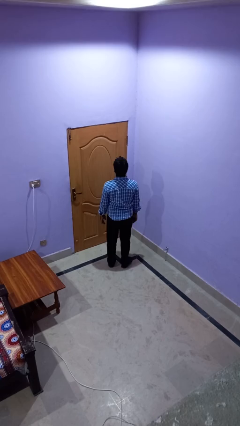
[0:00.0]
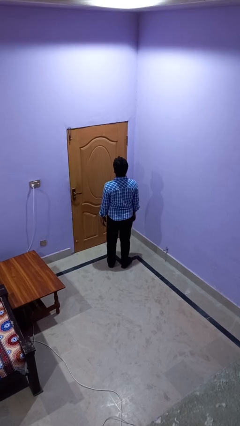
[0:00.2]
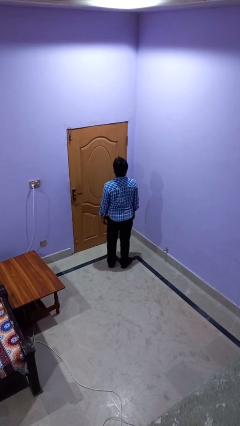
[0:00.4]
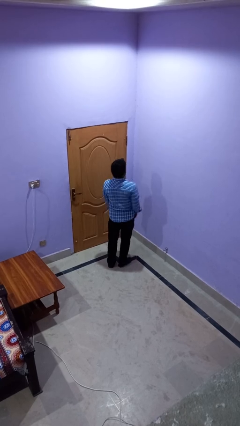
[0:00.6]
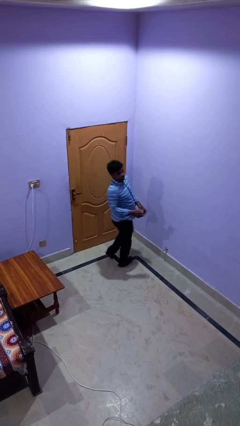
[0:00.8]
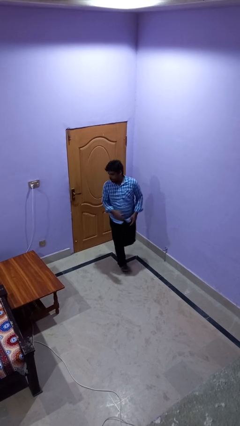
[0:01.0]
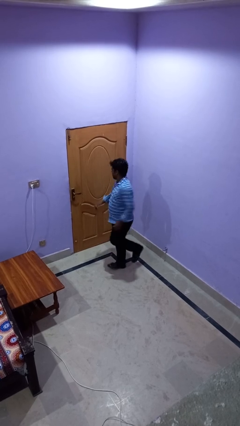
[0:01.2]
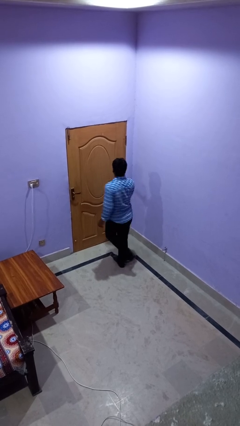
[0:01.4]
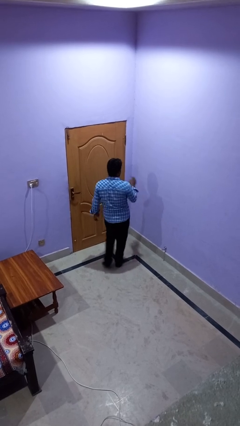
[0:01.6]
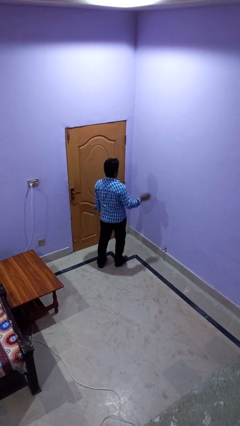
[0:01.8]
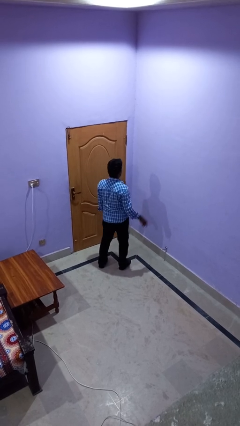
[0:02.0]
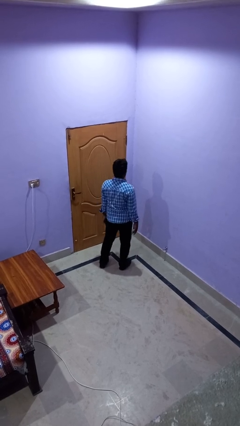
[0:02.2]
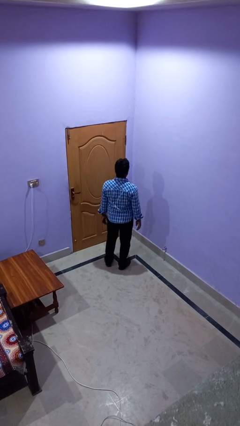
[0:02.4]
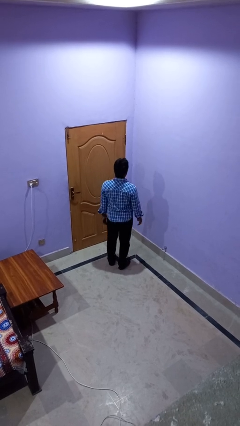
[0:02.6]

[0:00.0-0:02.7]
person twirls

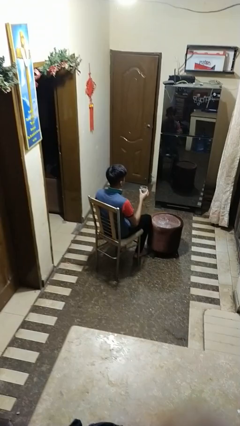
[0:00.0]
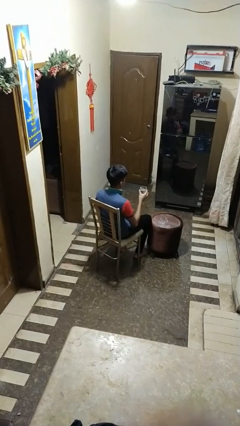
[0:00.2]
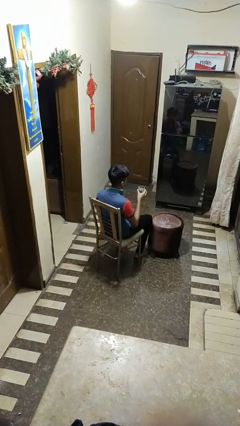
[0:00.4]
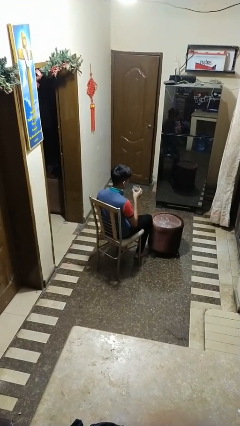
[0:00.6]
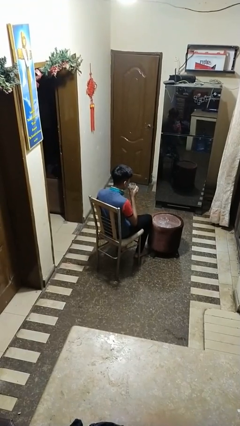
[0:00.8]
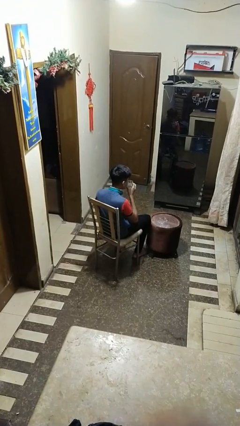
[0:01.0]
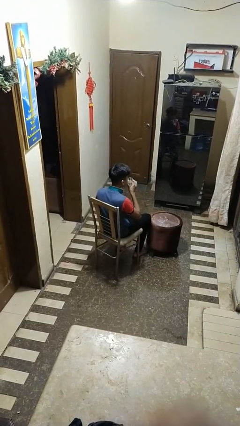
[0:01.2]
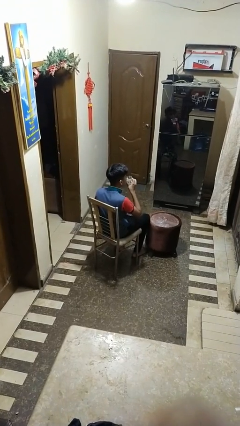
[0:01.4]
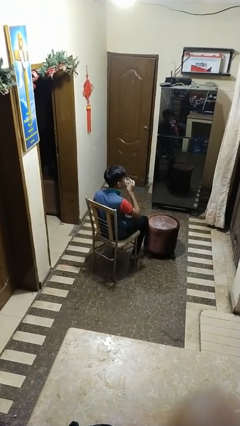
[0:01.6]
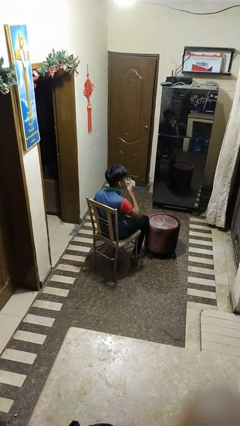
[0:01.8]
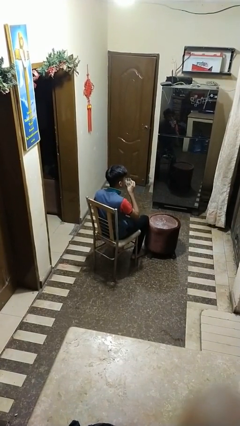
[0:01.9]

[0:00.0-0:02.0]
person drinks from shotglass

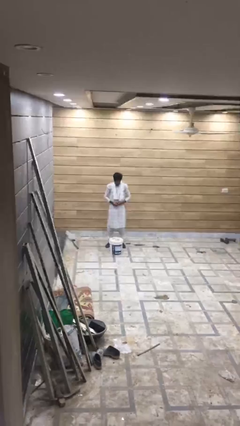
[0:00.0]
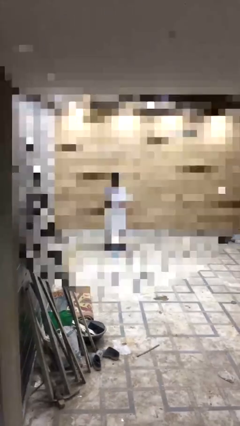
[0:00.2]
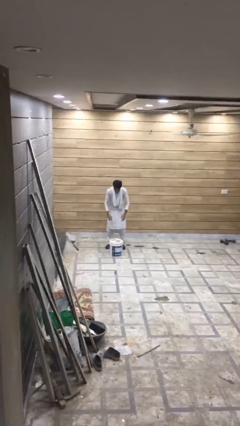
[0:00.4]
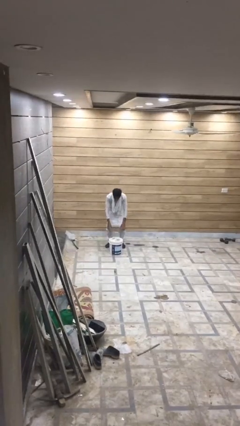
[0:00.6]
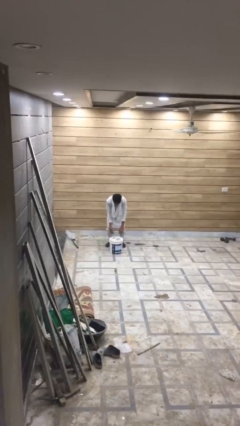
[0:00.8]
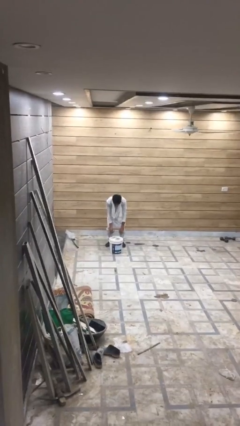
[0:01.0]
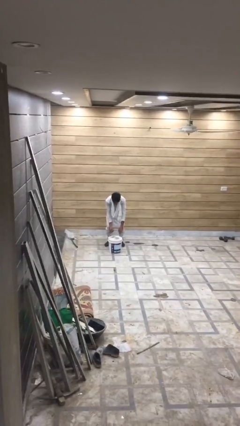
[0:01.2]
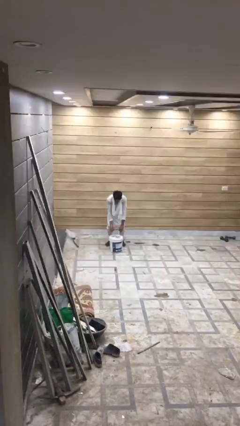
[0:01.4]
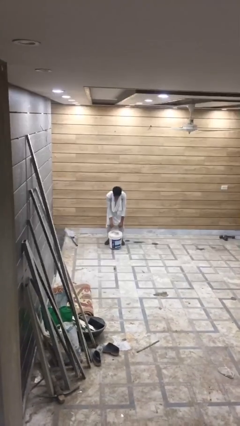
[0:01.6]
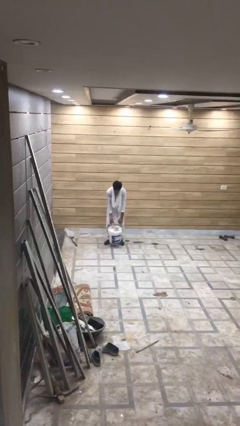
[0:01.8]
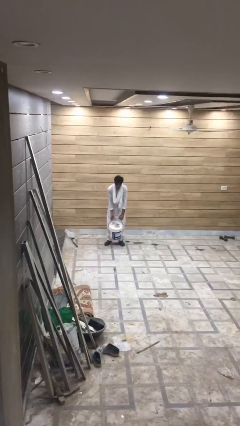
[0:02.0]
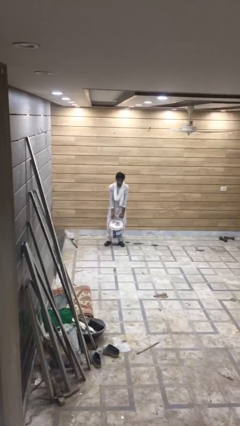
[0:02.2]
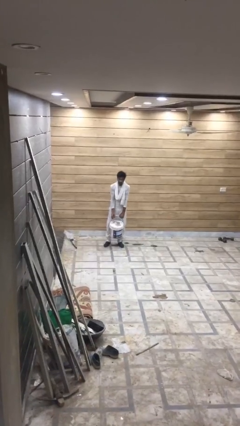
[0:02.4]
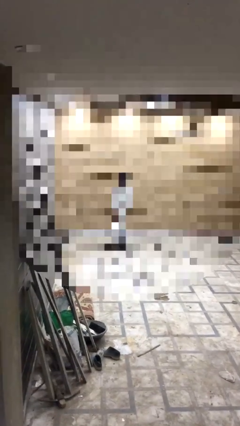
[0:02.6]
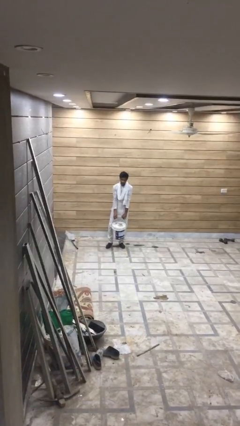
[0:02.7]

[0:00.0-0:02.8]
person picks up object from floor

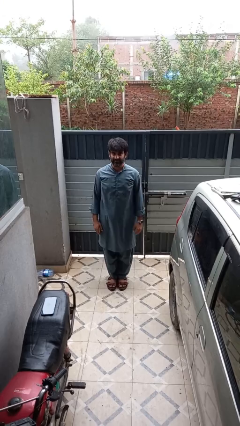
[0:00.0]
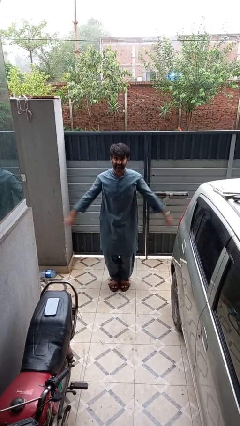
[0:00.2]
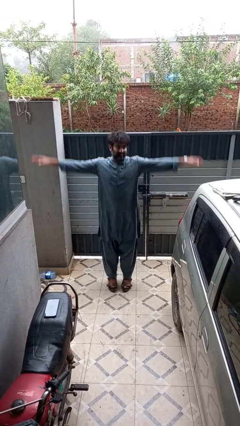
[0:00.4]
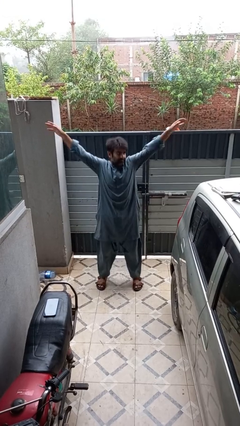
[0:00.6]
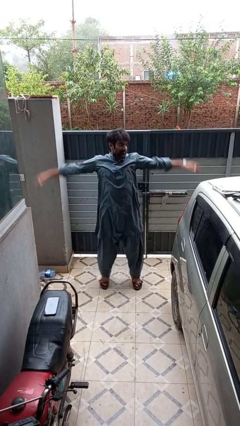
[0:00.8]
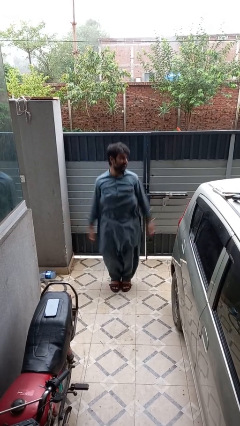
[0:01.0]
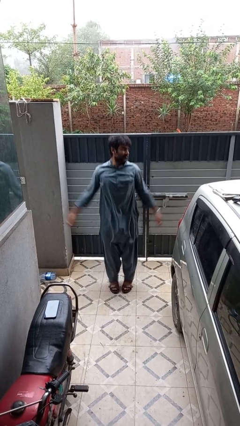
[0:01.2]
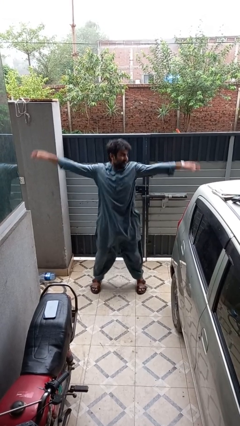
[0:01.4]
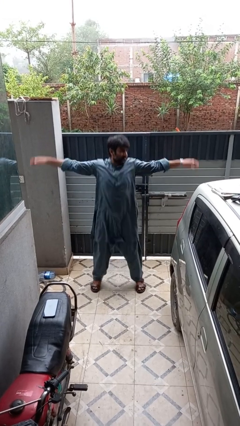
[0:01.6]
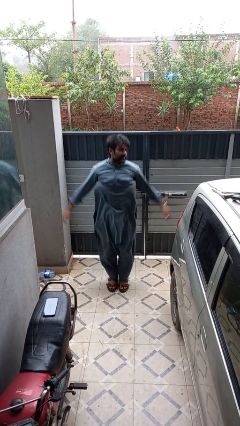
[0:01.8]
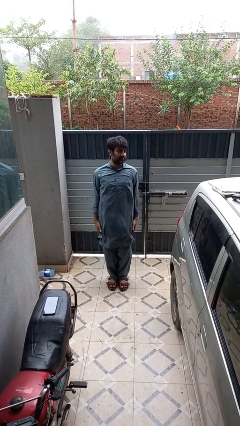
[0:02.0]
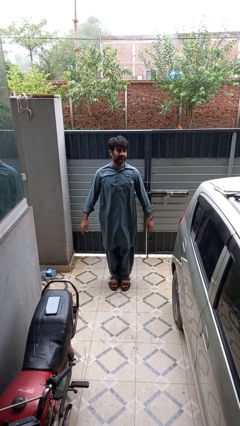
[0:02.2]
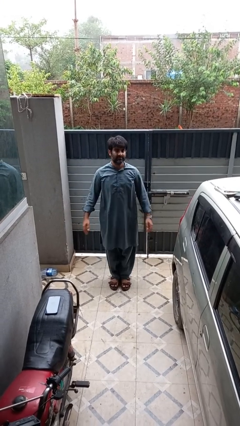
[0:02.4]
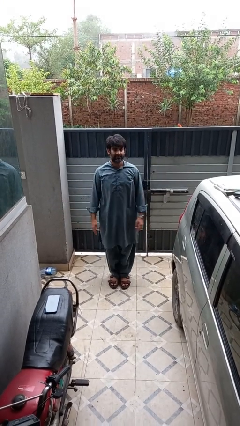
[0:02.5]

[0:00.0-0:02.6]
person exercises with jumping jacks

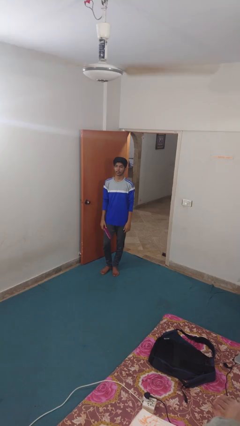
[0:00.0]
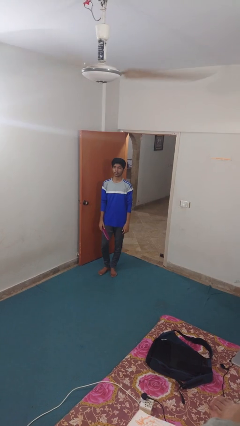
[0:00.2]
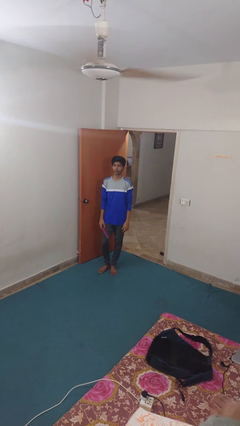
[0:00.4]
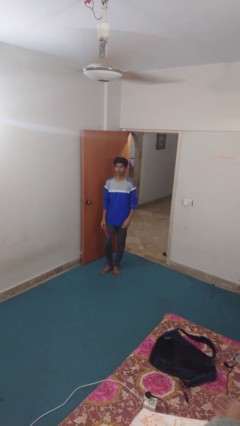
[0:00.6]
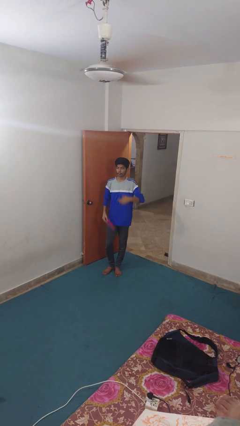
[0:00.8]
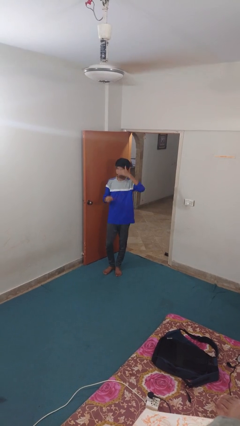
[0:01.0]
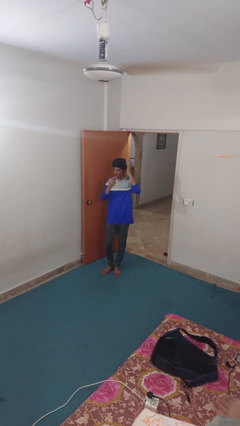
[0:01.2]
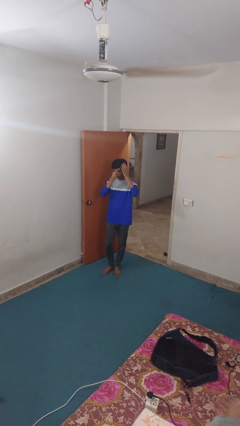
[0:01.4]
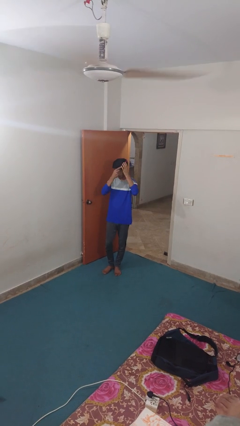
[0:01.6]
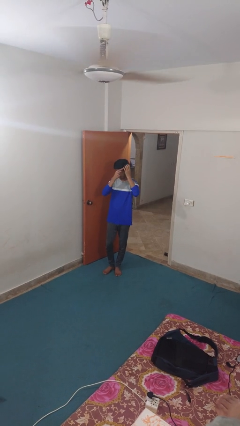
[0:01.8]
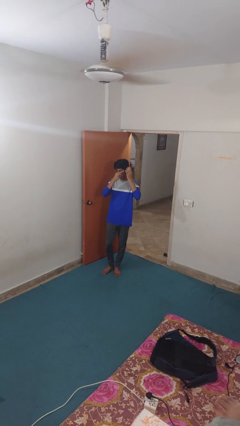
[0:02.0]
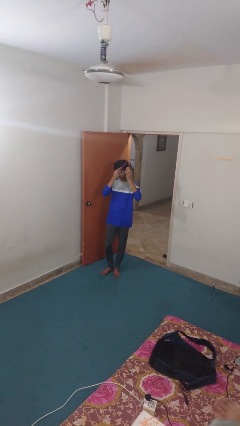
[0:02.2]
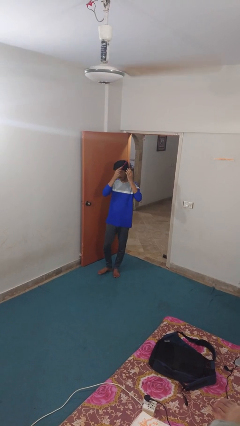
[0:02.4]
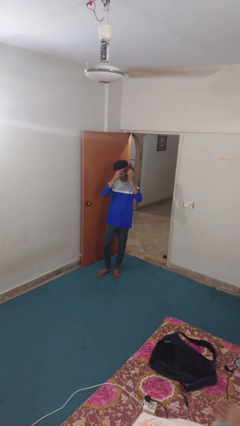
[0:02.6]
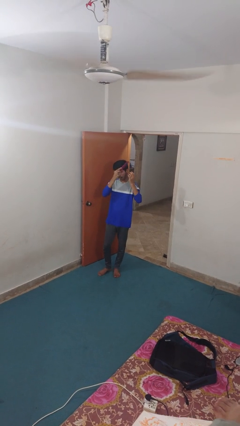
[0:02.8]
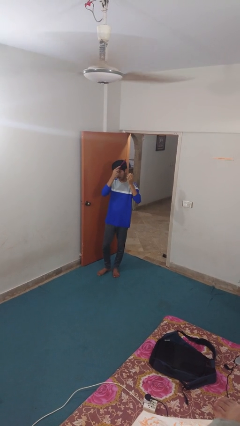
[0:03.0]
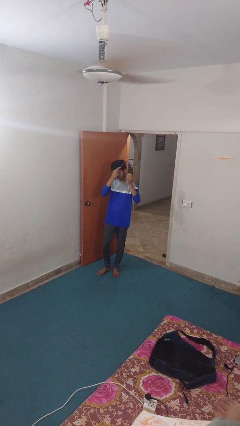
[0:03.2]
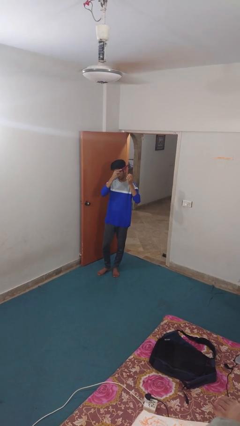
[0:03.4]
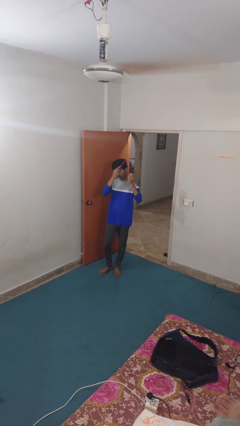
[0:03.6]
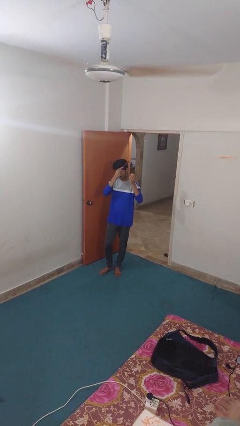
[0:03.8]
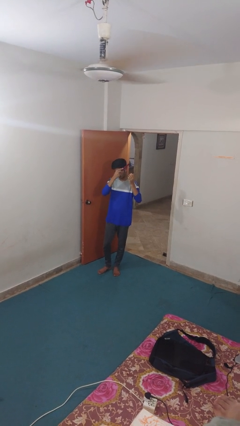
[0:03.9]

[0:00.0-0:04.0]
person brushes hair

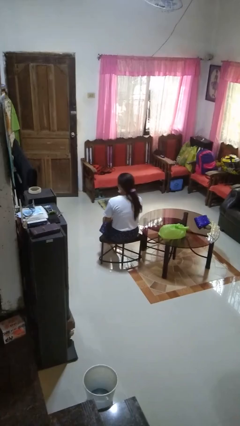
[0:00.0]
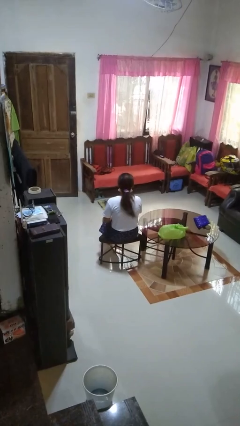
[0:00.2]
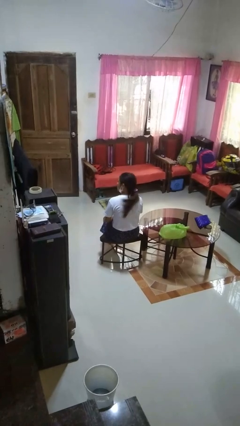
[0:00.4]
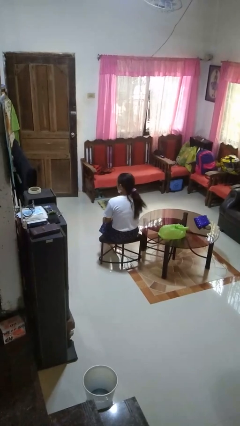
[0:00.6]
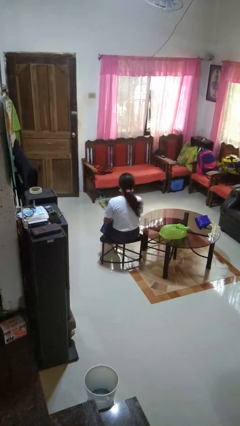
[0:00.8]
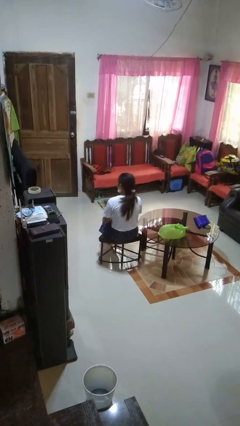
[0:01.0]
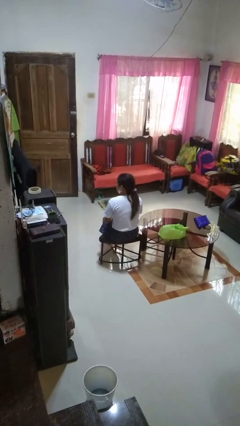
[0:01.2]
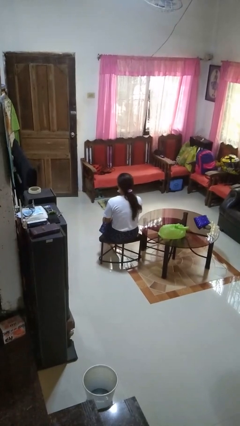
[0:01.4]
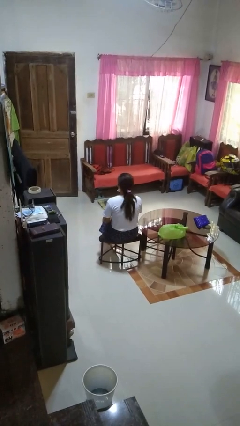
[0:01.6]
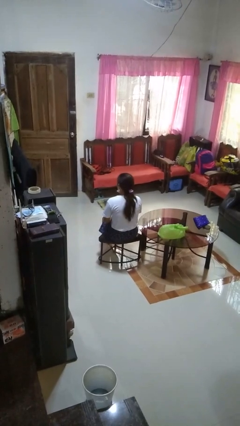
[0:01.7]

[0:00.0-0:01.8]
person shakes head

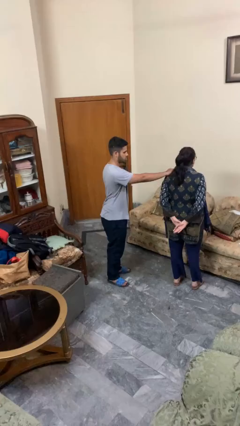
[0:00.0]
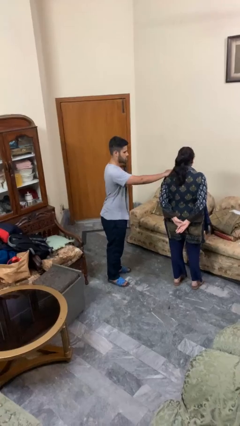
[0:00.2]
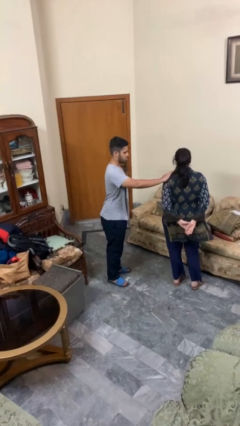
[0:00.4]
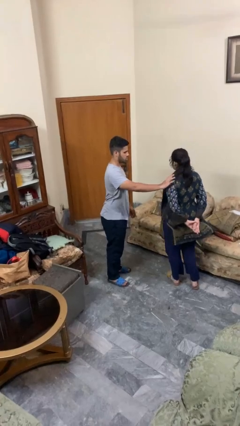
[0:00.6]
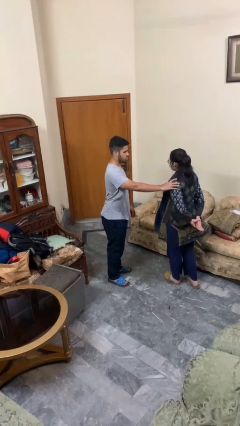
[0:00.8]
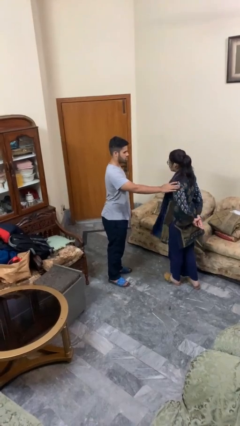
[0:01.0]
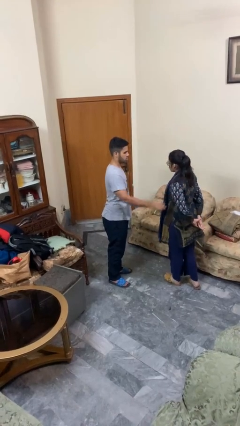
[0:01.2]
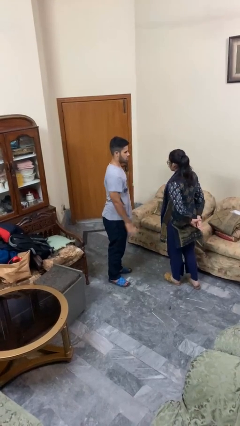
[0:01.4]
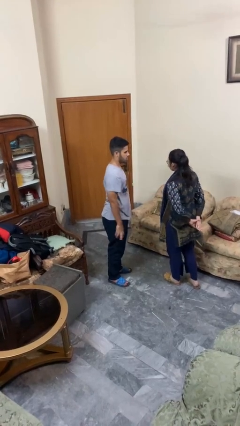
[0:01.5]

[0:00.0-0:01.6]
person spins person around
